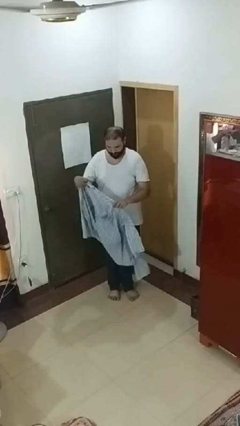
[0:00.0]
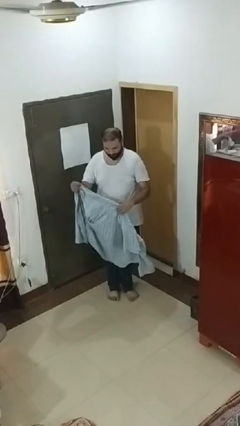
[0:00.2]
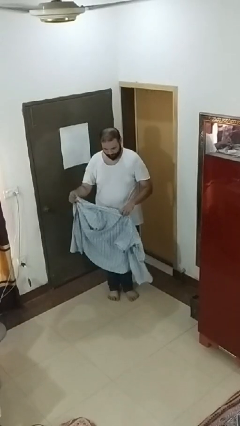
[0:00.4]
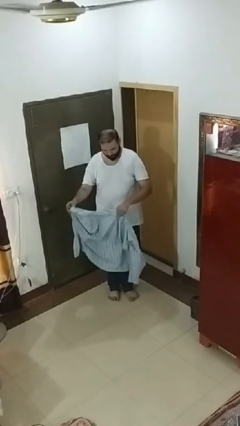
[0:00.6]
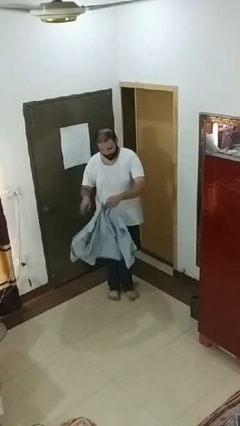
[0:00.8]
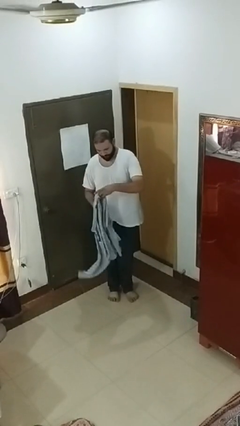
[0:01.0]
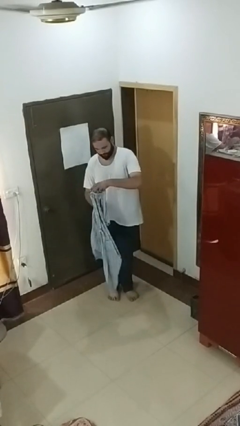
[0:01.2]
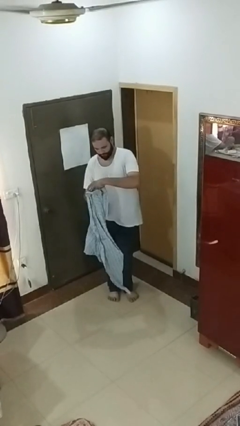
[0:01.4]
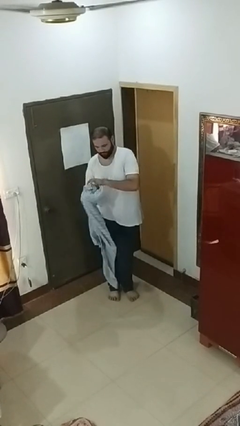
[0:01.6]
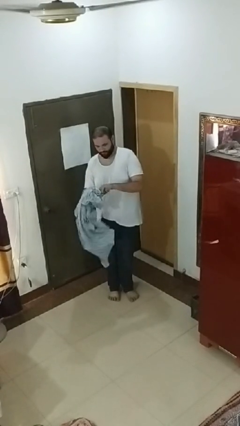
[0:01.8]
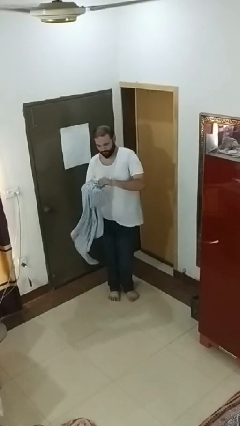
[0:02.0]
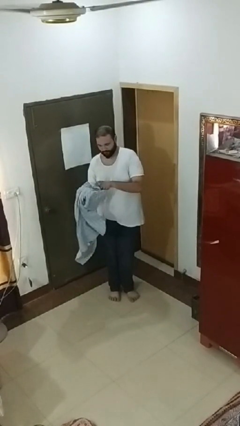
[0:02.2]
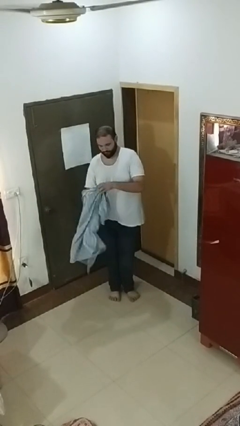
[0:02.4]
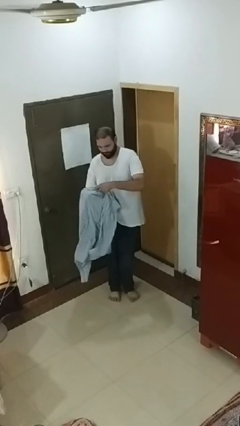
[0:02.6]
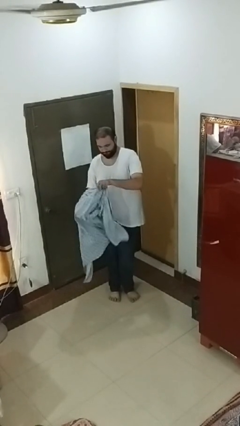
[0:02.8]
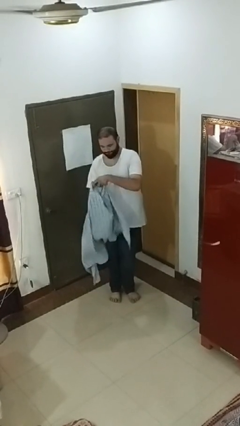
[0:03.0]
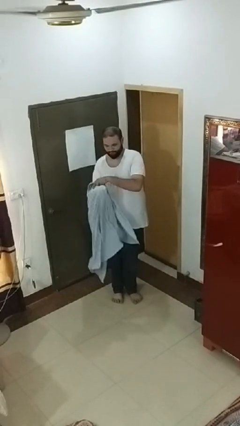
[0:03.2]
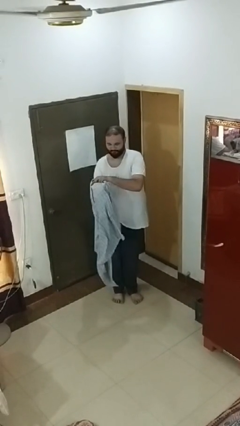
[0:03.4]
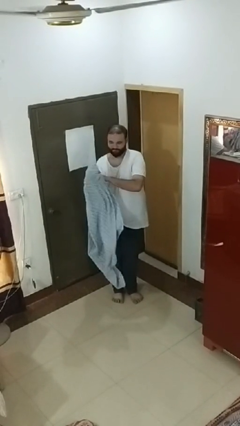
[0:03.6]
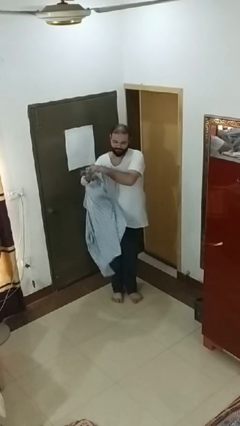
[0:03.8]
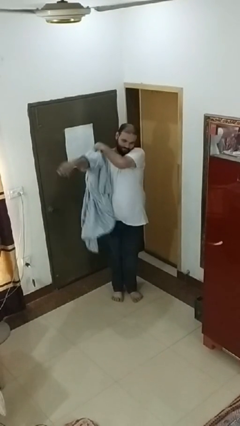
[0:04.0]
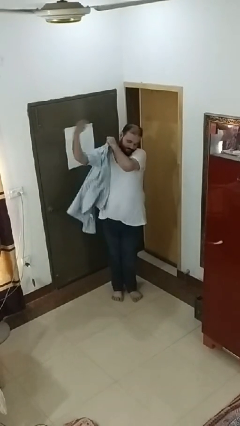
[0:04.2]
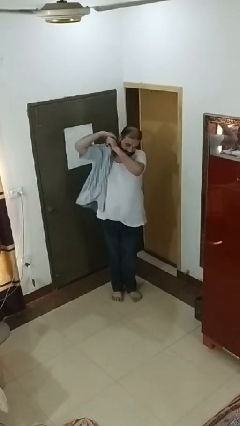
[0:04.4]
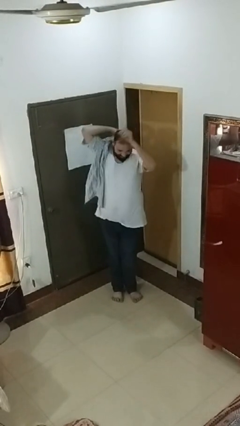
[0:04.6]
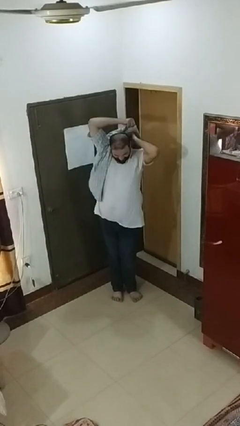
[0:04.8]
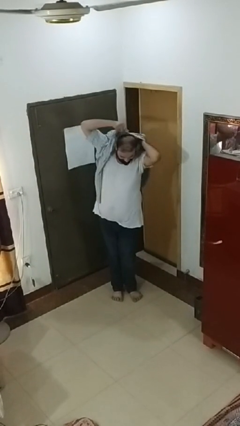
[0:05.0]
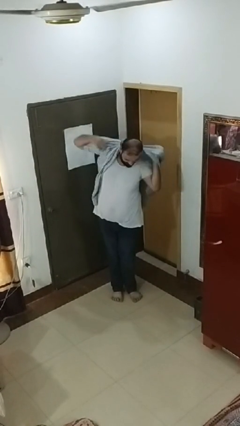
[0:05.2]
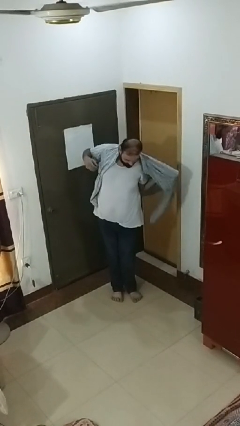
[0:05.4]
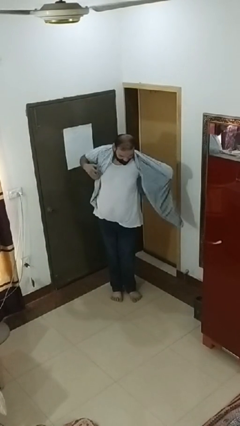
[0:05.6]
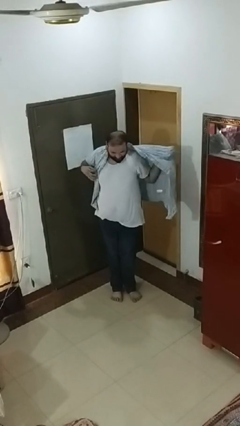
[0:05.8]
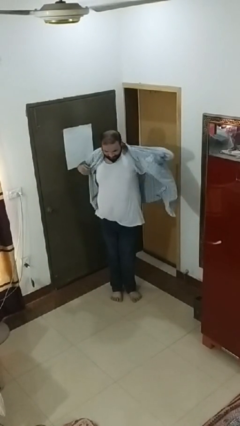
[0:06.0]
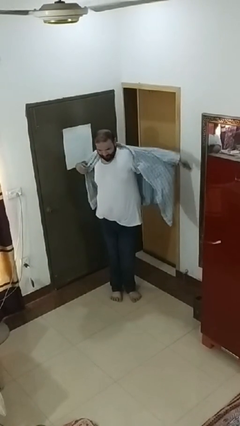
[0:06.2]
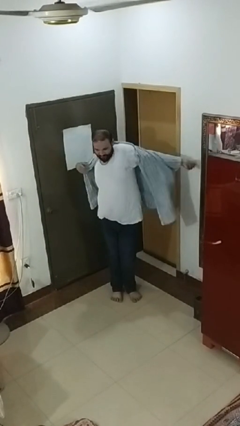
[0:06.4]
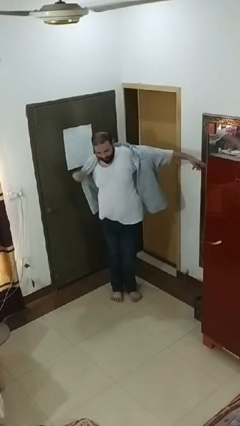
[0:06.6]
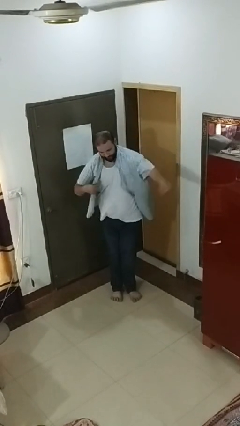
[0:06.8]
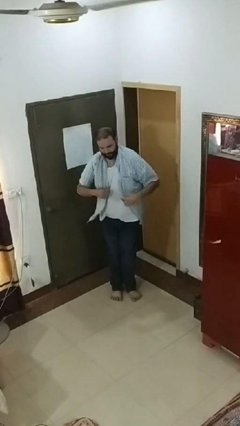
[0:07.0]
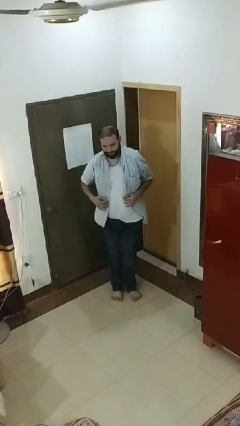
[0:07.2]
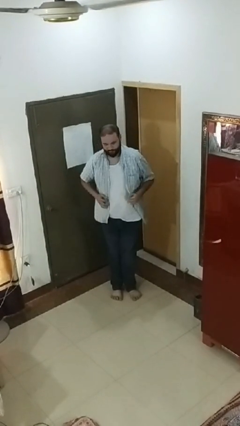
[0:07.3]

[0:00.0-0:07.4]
person puts on shirt

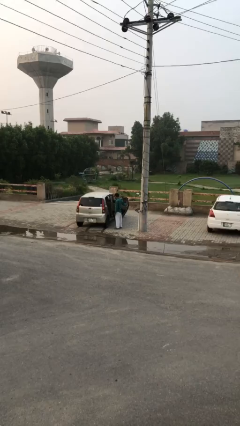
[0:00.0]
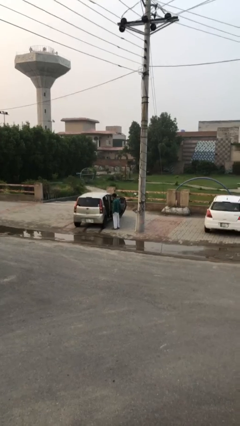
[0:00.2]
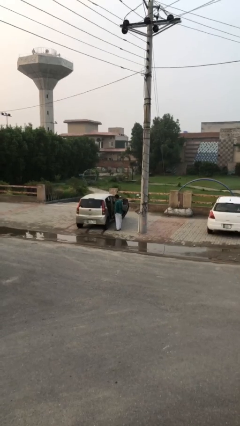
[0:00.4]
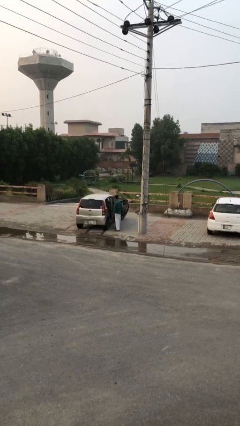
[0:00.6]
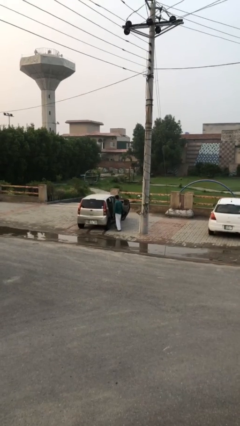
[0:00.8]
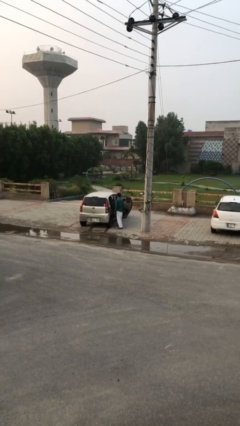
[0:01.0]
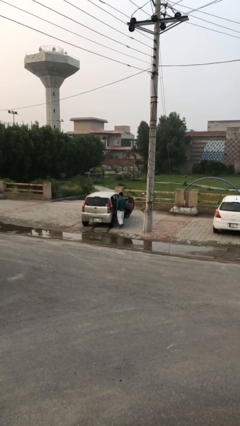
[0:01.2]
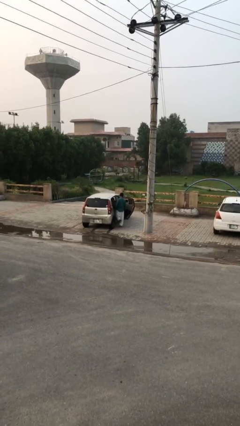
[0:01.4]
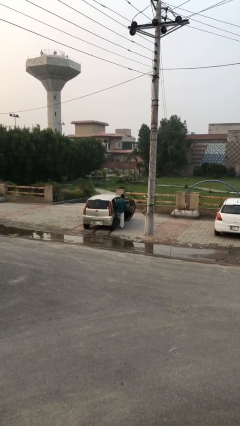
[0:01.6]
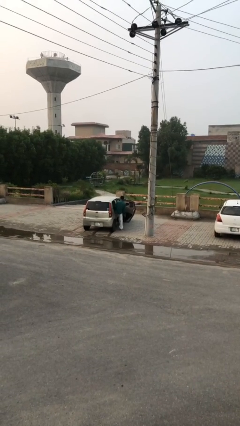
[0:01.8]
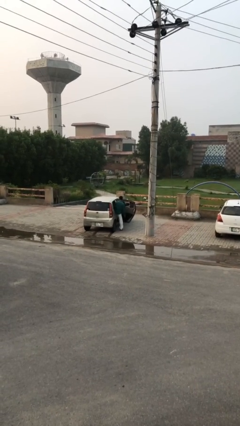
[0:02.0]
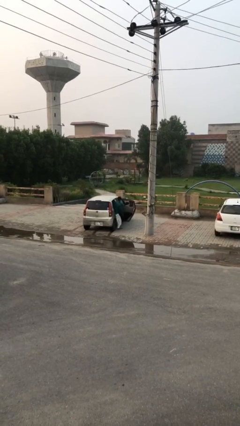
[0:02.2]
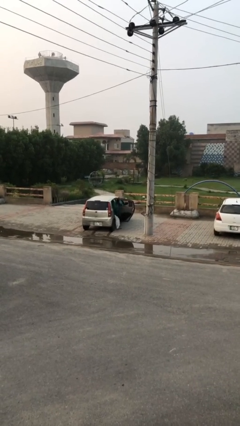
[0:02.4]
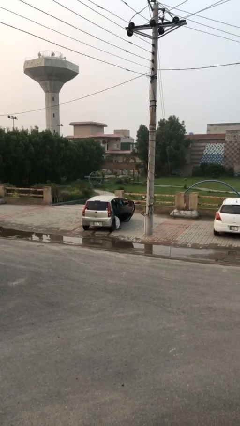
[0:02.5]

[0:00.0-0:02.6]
person enters car

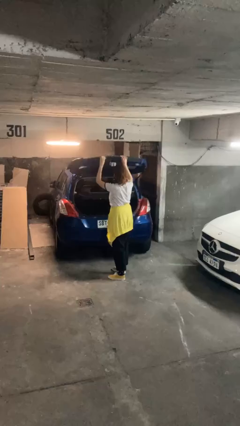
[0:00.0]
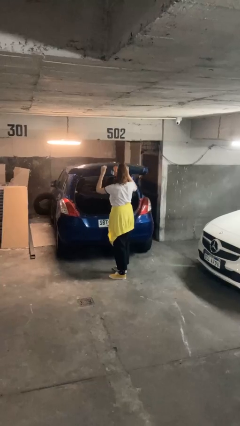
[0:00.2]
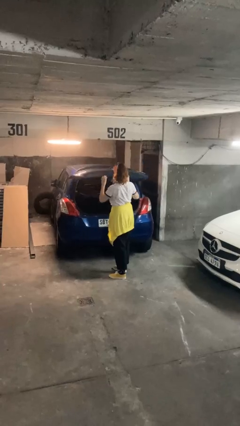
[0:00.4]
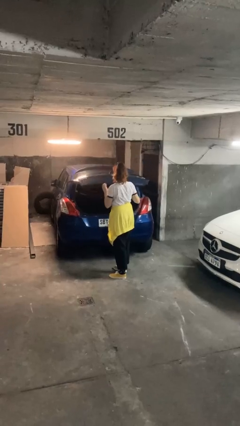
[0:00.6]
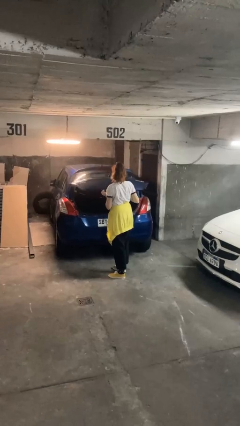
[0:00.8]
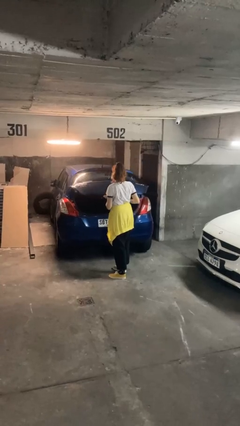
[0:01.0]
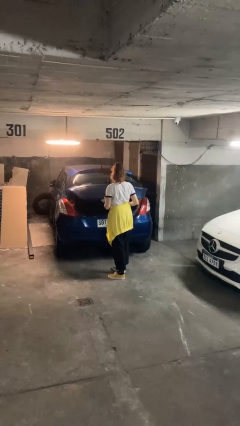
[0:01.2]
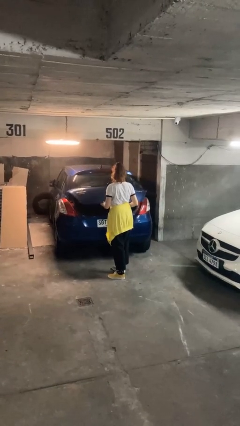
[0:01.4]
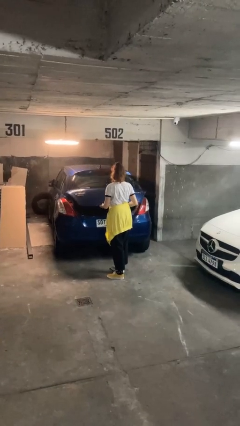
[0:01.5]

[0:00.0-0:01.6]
person closes car trunk

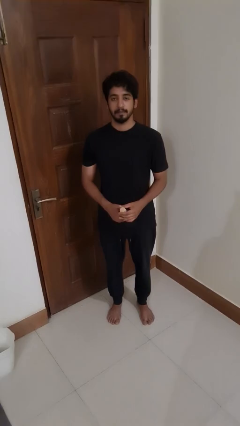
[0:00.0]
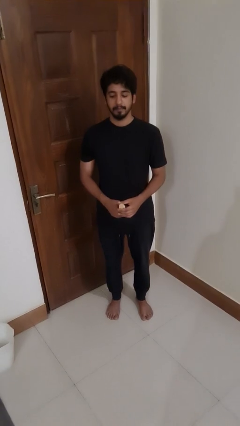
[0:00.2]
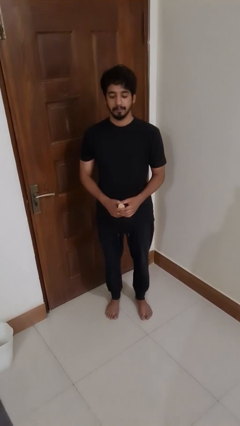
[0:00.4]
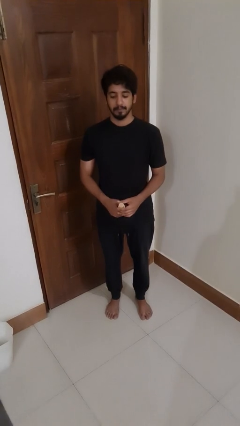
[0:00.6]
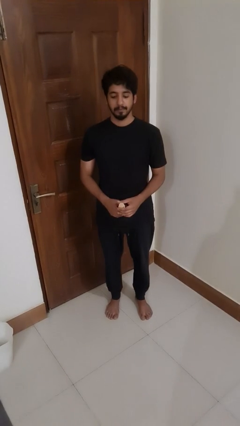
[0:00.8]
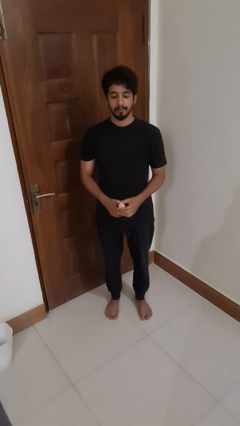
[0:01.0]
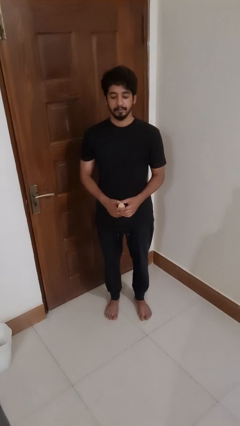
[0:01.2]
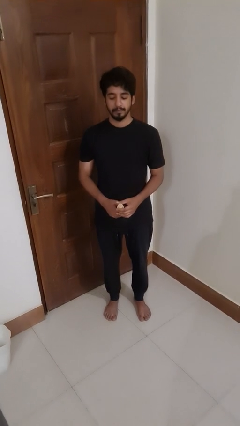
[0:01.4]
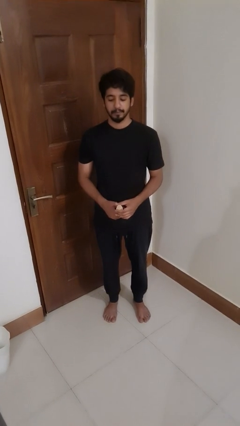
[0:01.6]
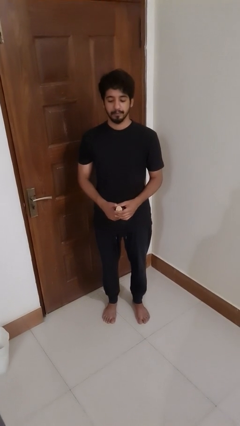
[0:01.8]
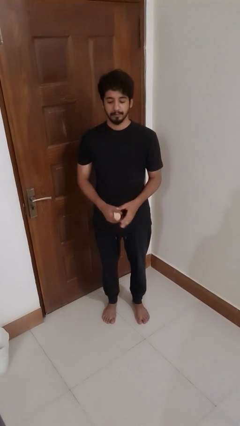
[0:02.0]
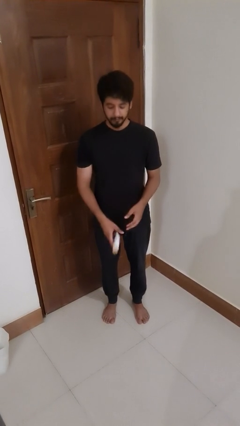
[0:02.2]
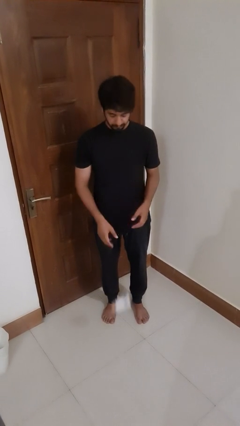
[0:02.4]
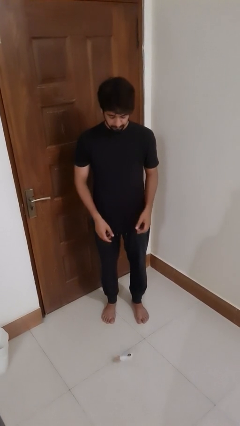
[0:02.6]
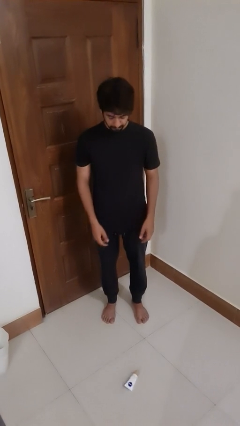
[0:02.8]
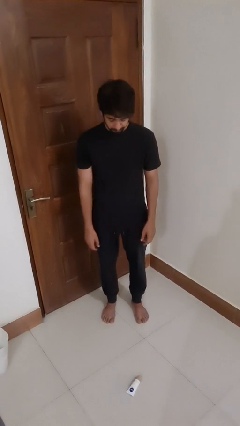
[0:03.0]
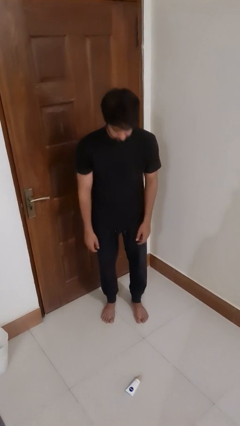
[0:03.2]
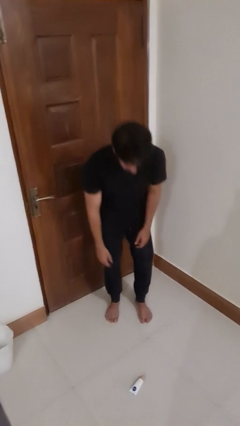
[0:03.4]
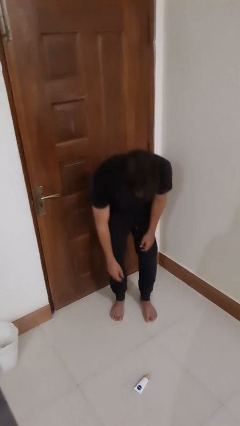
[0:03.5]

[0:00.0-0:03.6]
person drops object

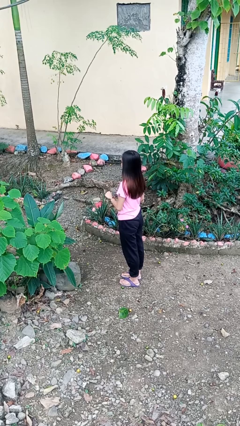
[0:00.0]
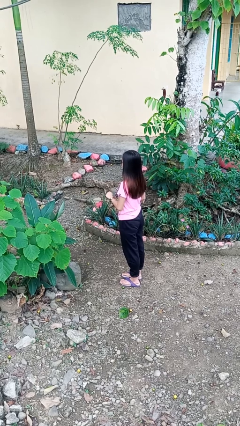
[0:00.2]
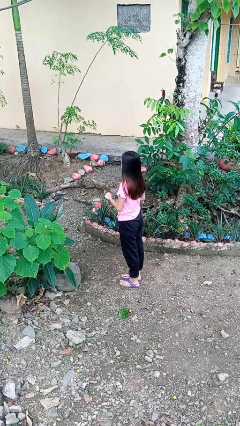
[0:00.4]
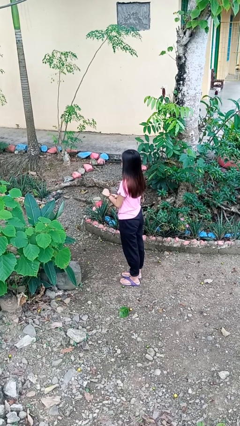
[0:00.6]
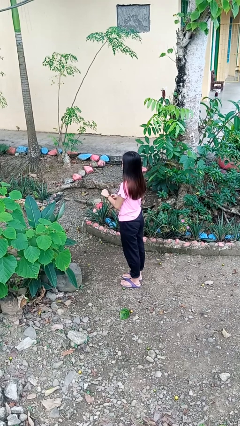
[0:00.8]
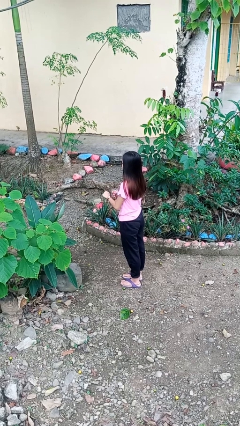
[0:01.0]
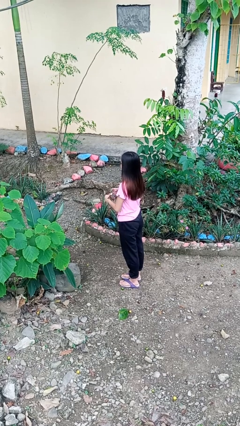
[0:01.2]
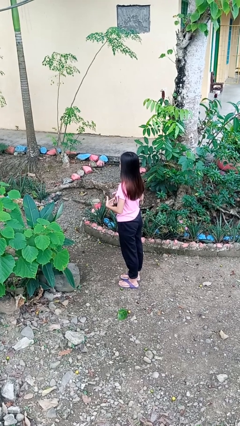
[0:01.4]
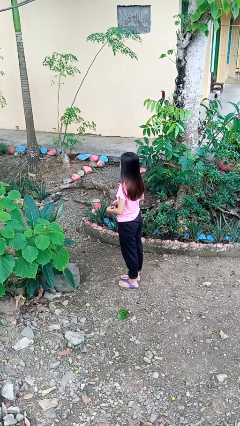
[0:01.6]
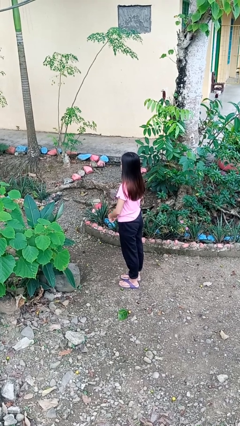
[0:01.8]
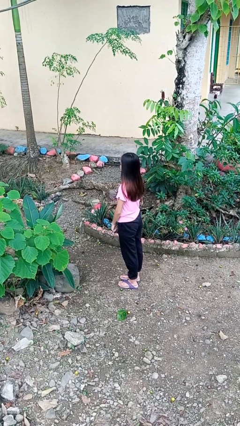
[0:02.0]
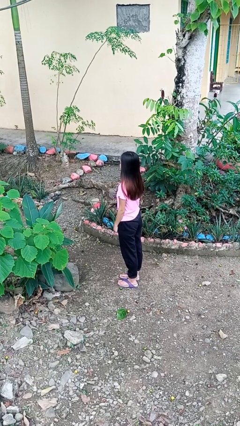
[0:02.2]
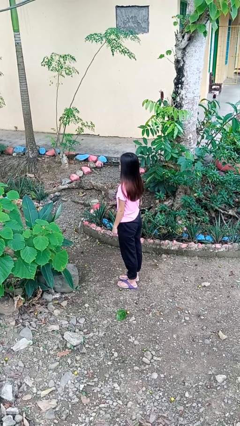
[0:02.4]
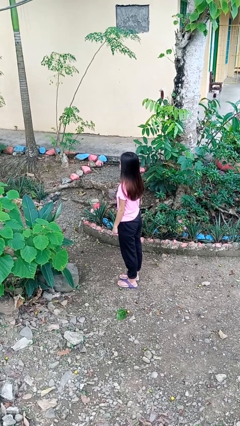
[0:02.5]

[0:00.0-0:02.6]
person takes off wristwatch

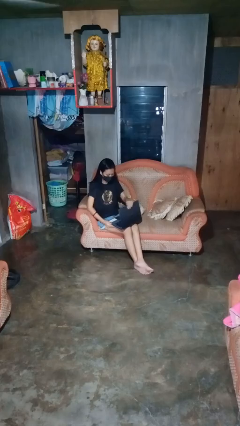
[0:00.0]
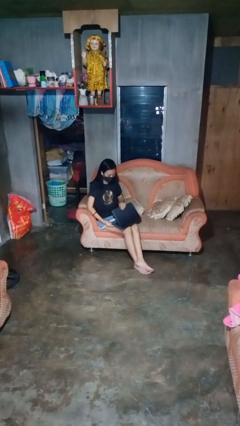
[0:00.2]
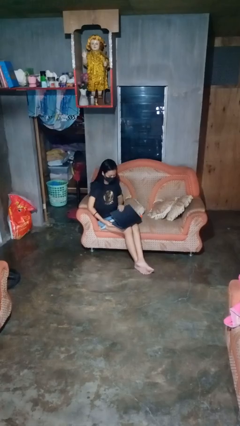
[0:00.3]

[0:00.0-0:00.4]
person closes laptop
